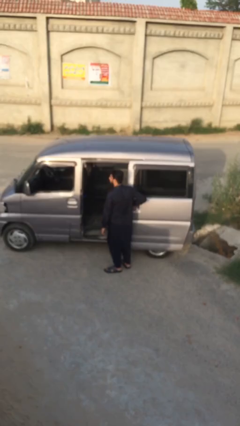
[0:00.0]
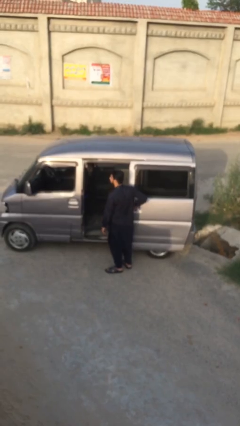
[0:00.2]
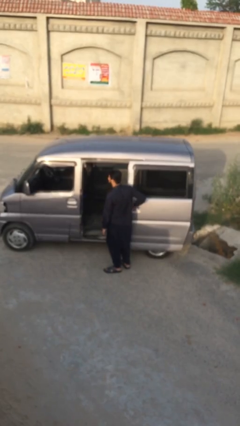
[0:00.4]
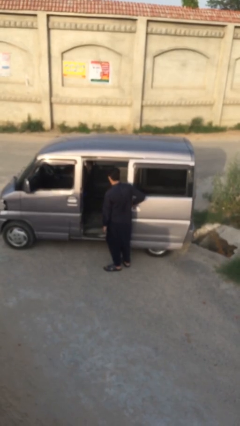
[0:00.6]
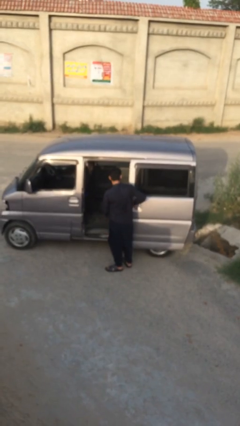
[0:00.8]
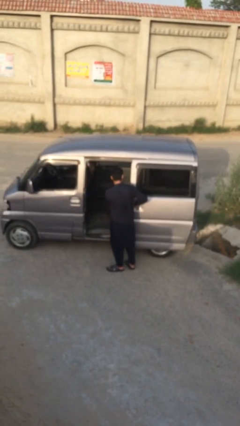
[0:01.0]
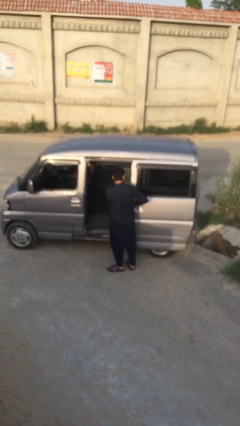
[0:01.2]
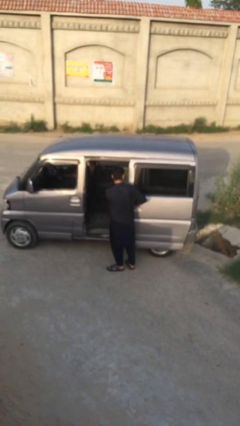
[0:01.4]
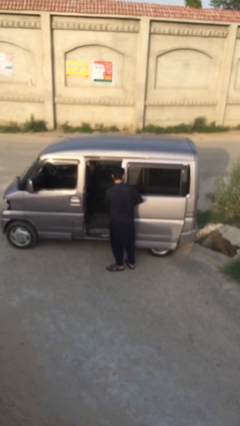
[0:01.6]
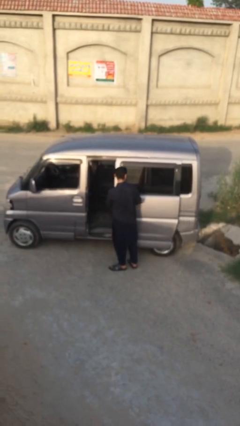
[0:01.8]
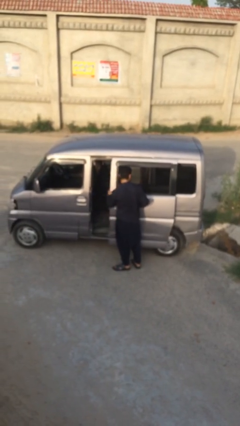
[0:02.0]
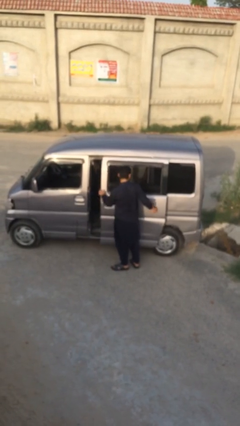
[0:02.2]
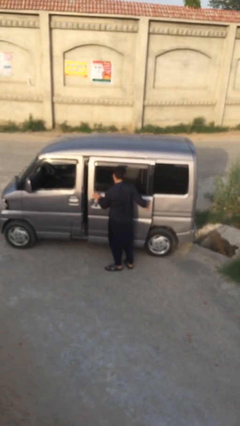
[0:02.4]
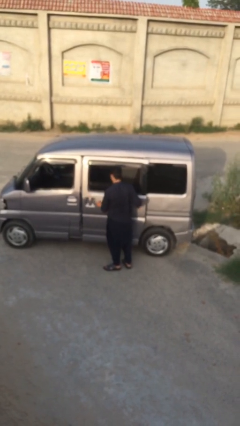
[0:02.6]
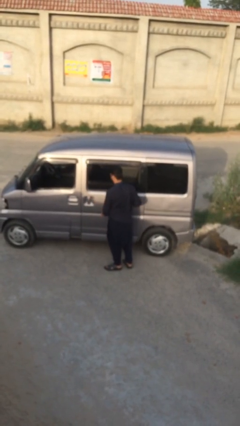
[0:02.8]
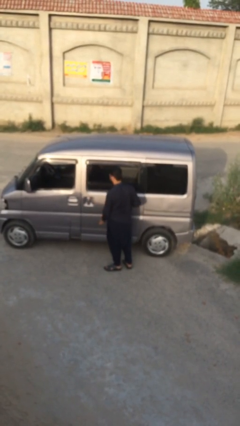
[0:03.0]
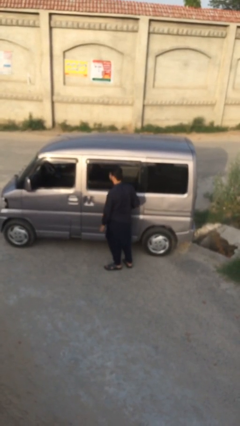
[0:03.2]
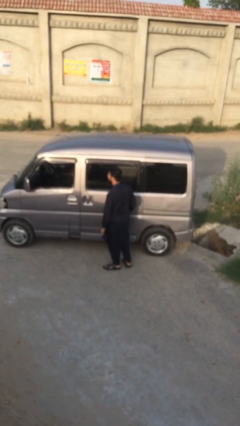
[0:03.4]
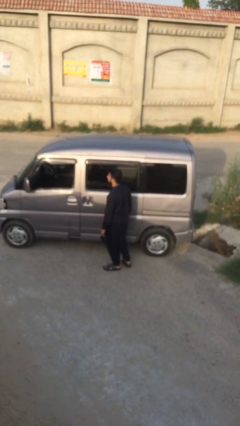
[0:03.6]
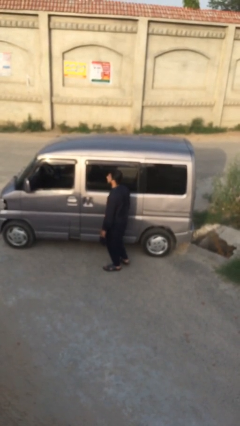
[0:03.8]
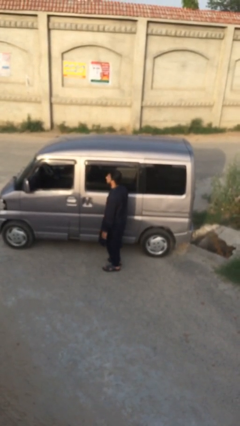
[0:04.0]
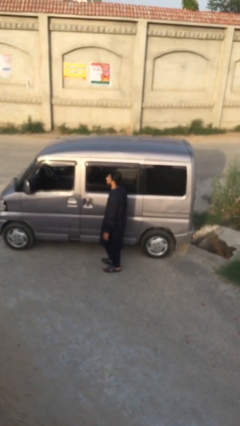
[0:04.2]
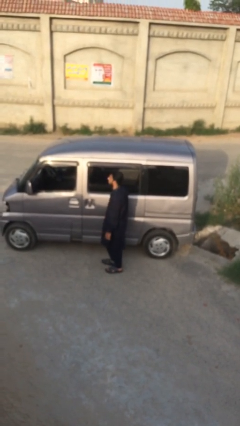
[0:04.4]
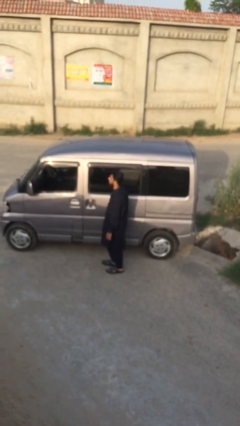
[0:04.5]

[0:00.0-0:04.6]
person closes car door

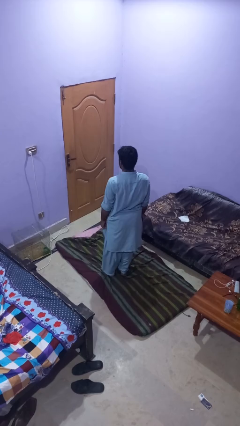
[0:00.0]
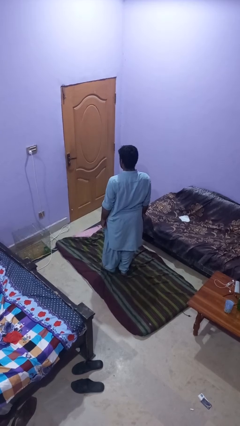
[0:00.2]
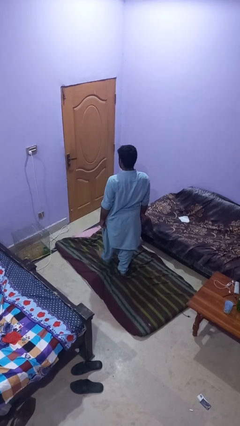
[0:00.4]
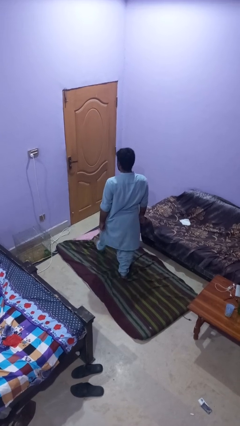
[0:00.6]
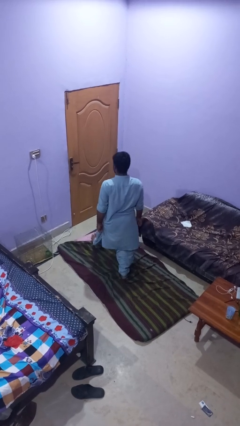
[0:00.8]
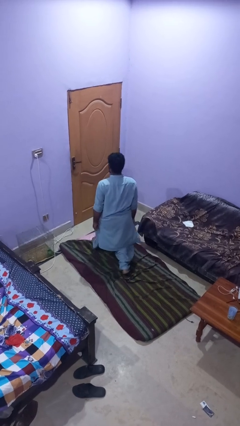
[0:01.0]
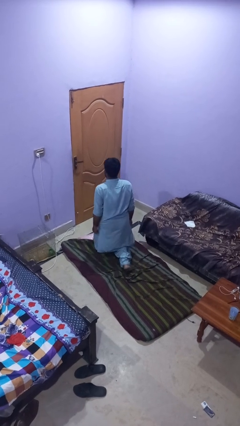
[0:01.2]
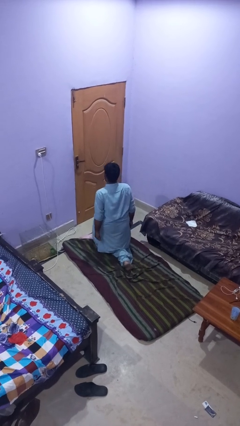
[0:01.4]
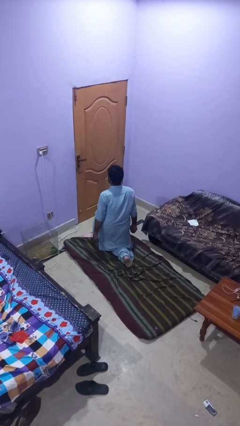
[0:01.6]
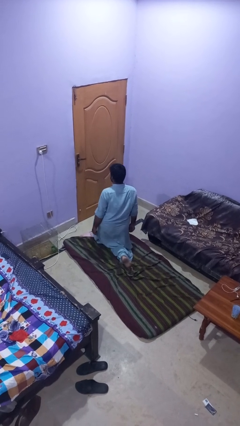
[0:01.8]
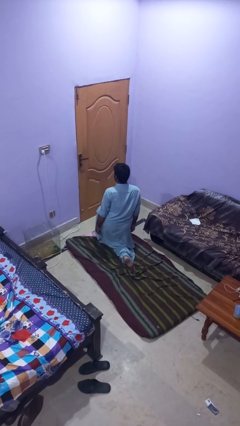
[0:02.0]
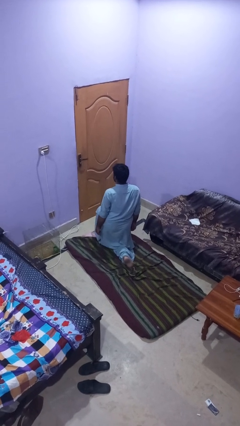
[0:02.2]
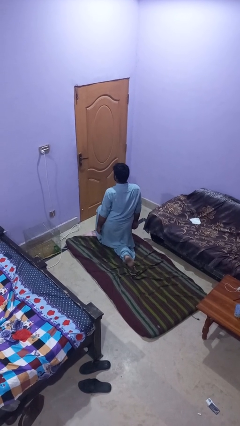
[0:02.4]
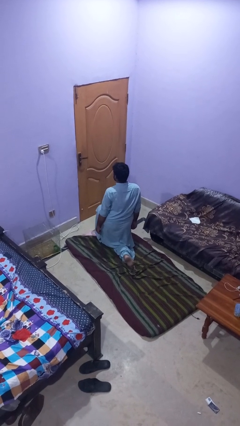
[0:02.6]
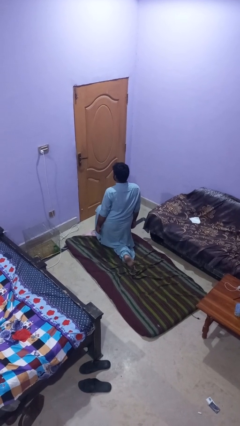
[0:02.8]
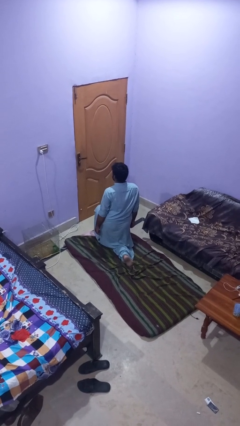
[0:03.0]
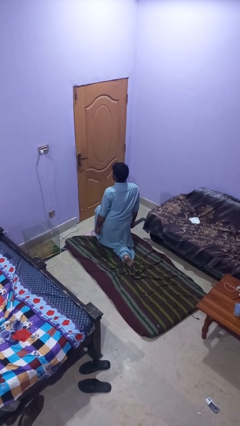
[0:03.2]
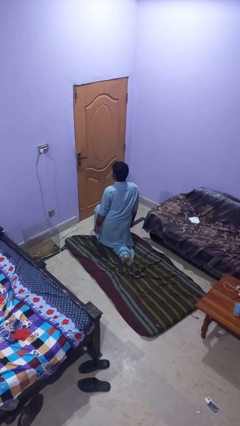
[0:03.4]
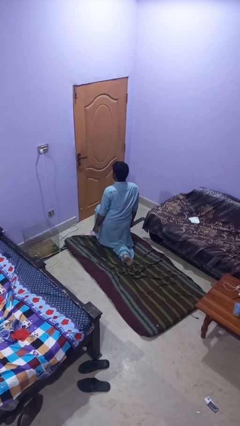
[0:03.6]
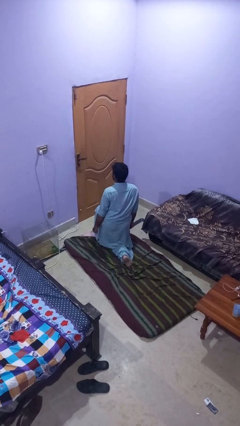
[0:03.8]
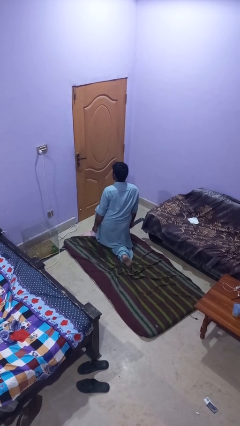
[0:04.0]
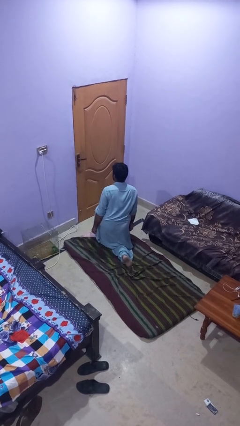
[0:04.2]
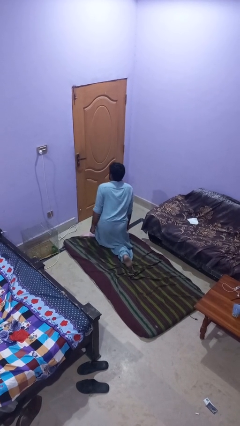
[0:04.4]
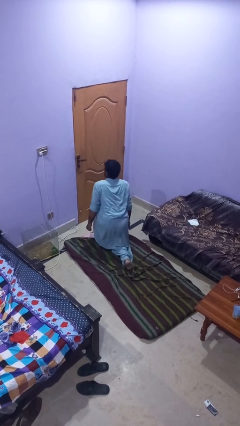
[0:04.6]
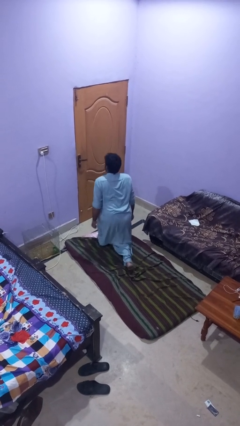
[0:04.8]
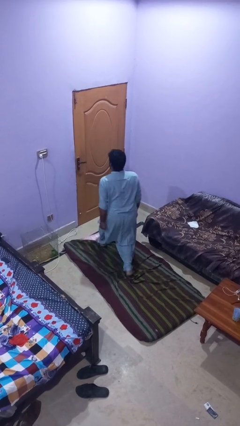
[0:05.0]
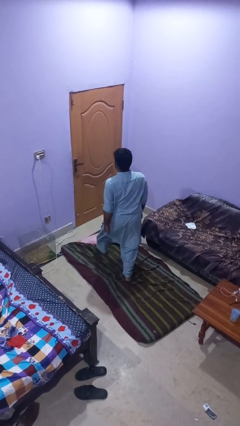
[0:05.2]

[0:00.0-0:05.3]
person exercises with lunges

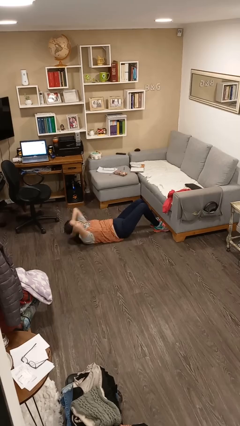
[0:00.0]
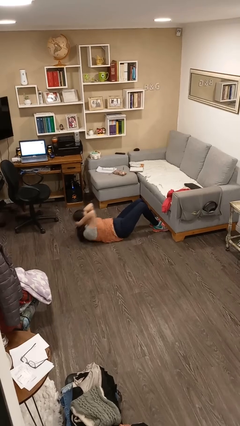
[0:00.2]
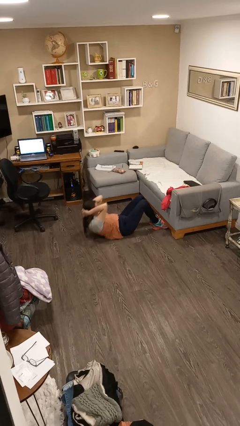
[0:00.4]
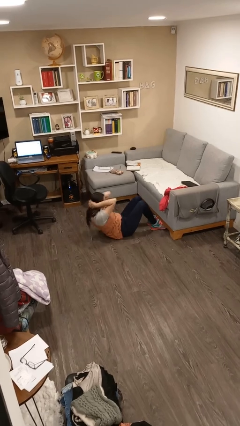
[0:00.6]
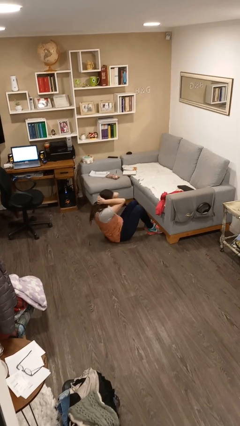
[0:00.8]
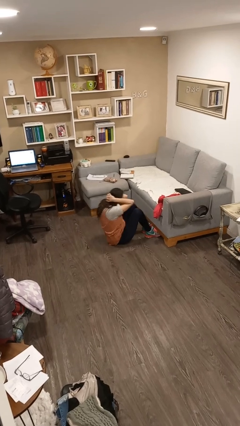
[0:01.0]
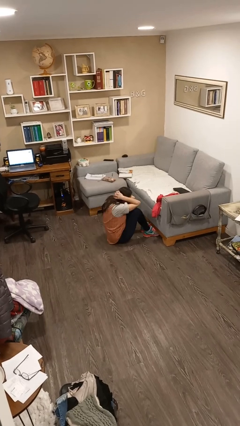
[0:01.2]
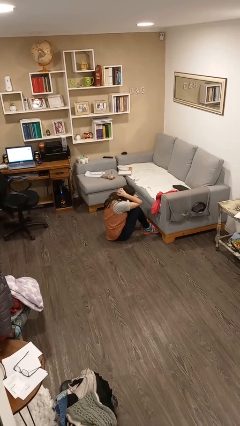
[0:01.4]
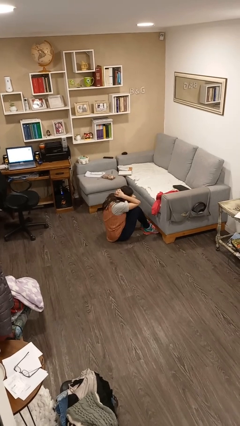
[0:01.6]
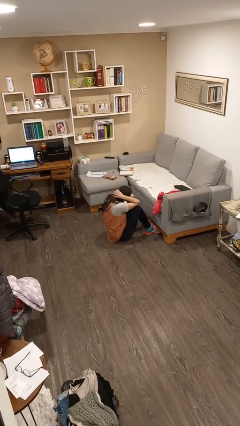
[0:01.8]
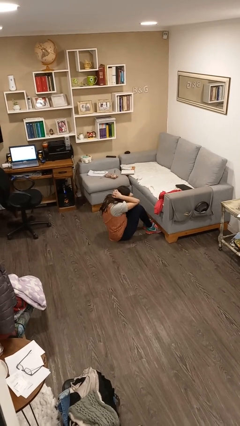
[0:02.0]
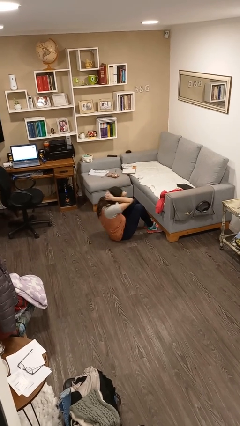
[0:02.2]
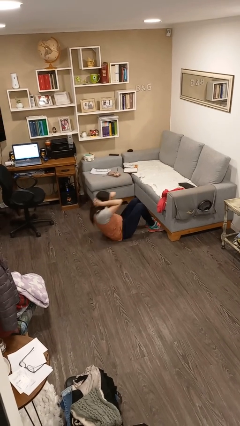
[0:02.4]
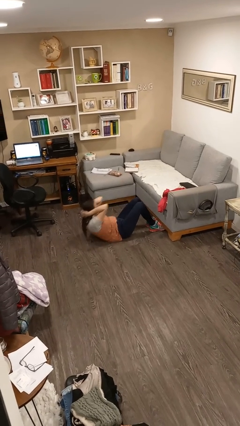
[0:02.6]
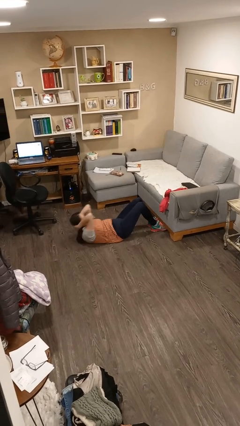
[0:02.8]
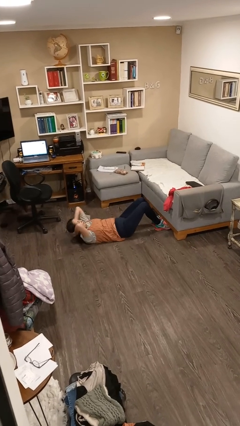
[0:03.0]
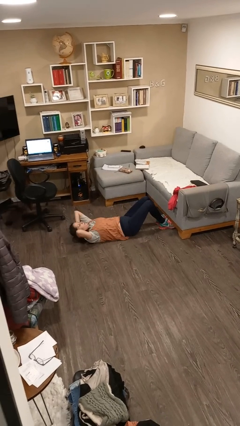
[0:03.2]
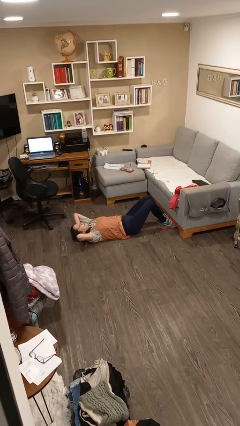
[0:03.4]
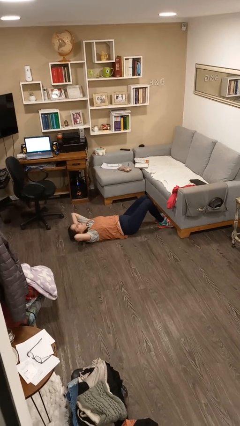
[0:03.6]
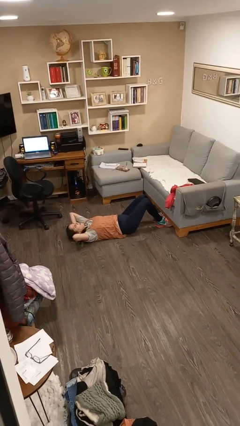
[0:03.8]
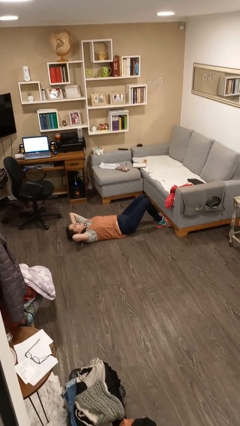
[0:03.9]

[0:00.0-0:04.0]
person exercises with situp

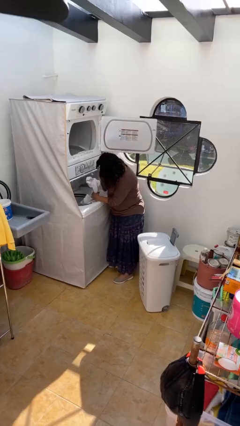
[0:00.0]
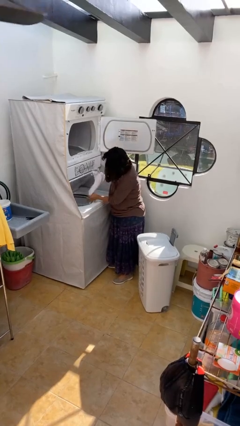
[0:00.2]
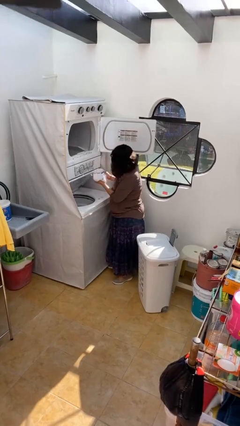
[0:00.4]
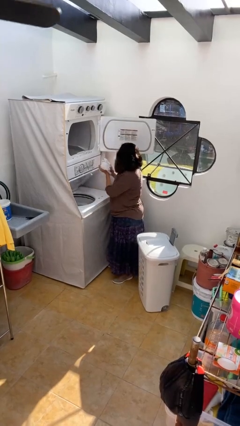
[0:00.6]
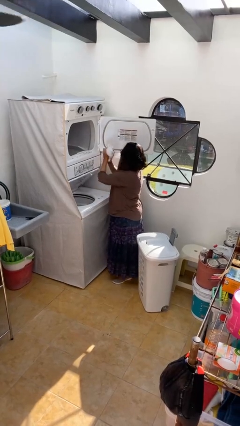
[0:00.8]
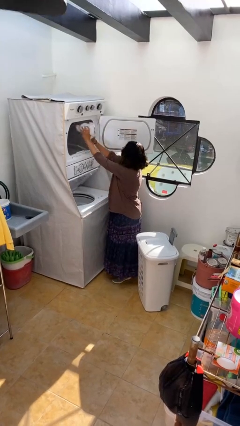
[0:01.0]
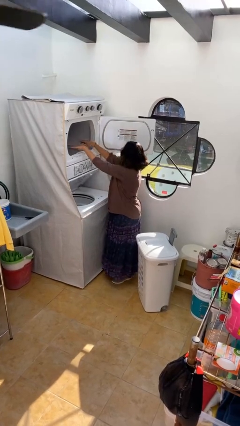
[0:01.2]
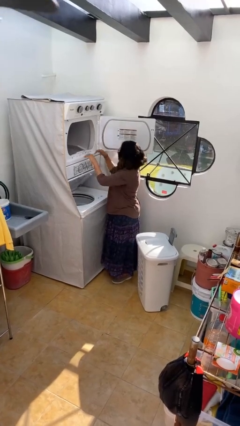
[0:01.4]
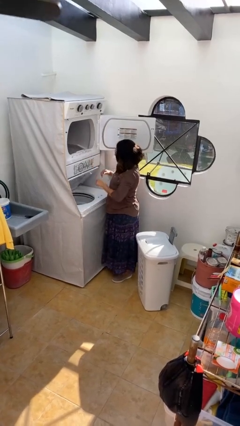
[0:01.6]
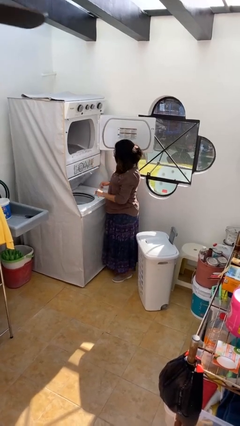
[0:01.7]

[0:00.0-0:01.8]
person loads dryer

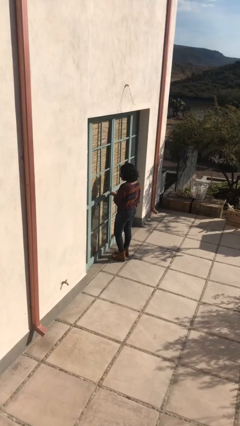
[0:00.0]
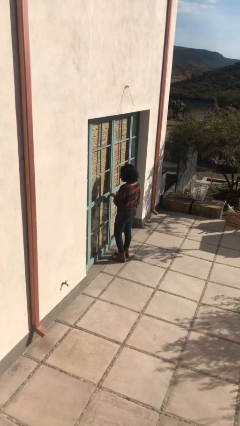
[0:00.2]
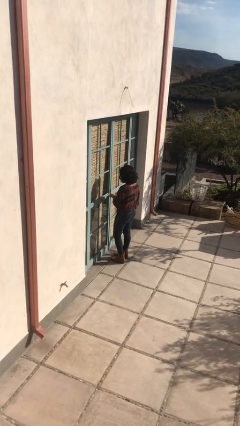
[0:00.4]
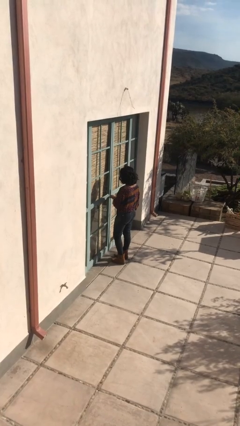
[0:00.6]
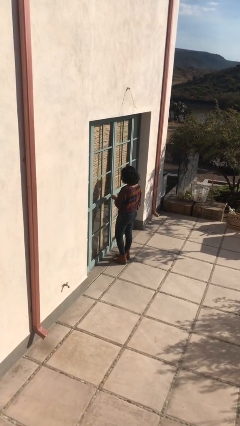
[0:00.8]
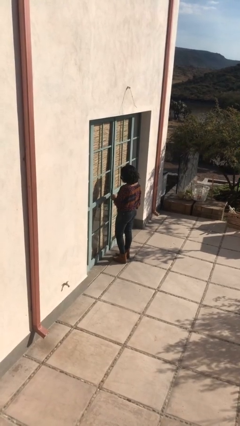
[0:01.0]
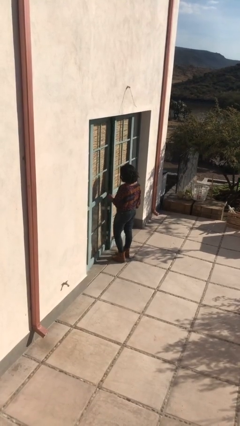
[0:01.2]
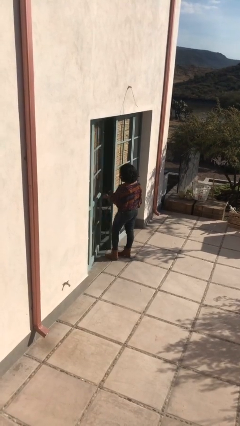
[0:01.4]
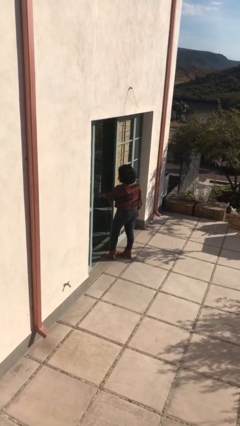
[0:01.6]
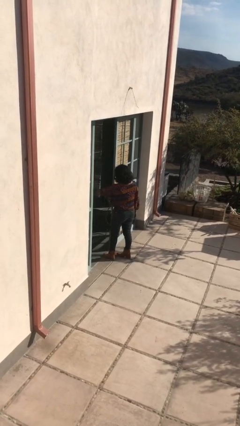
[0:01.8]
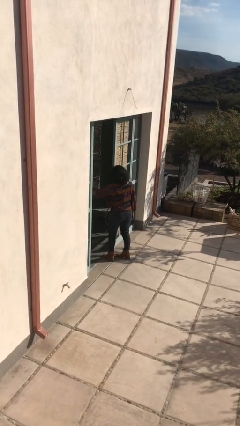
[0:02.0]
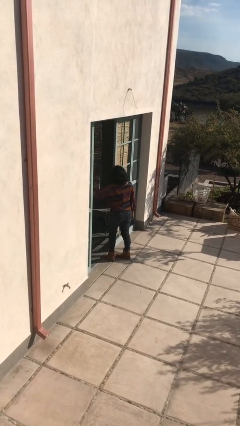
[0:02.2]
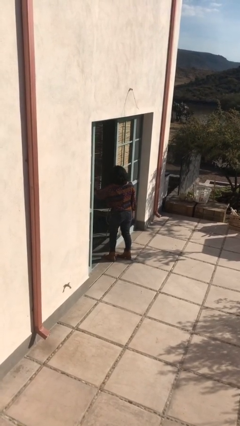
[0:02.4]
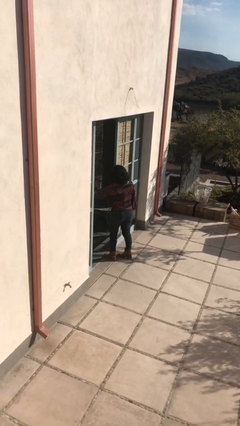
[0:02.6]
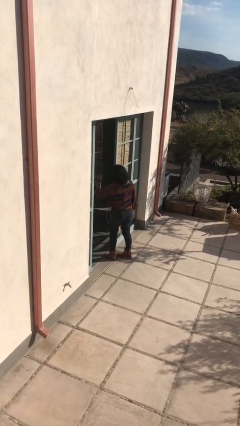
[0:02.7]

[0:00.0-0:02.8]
person opens facility door
